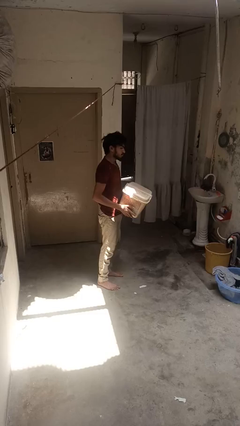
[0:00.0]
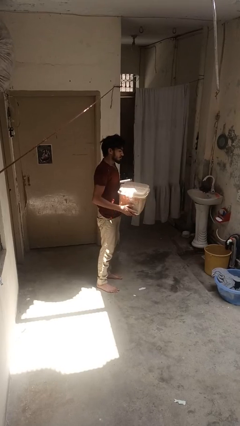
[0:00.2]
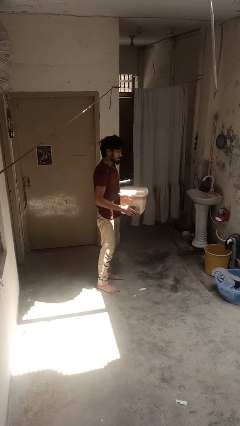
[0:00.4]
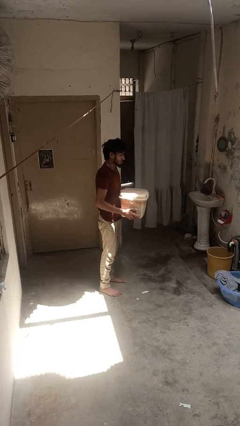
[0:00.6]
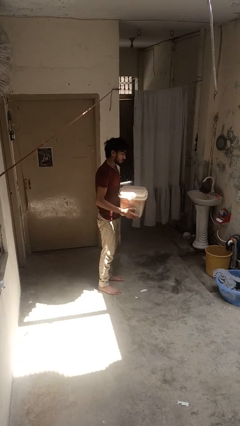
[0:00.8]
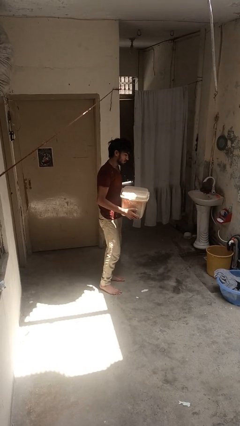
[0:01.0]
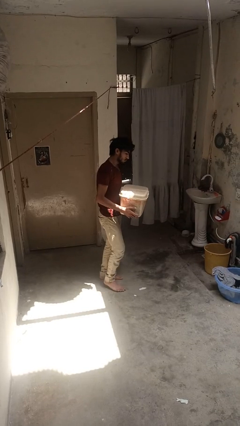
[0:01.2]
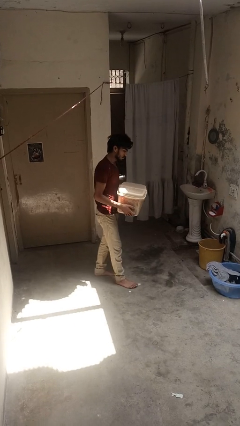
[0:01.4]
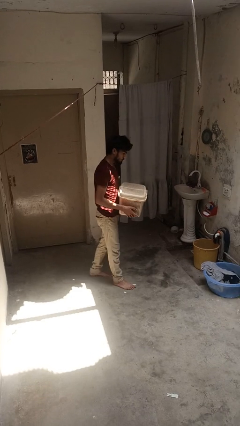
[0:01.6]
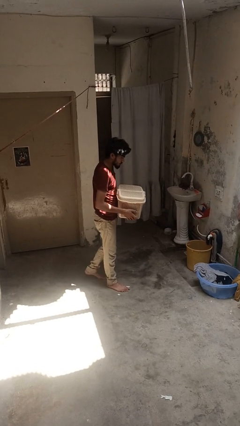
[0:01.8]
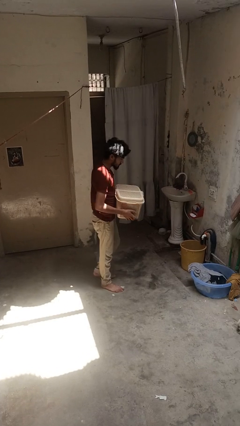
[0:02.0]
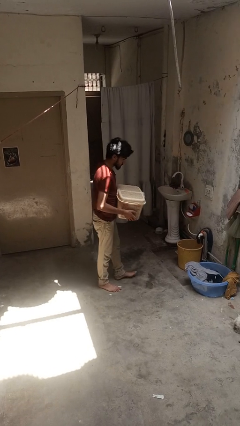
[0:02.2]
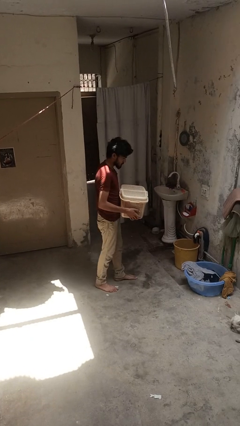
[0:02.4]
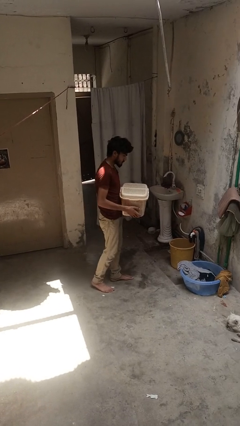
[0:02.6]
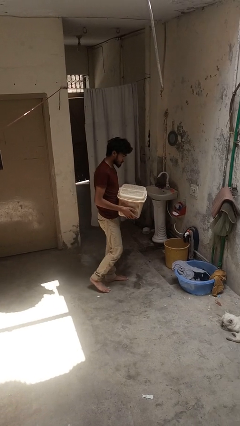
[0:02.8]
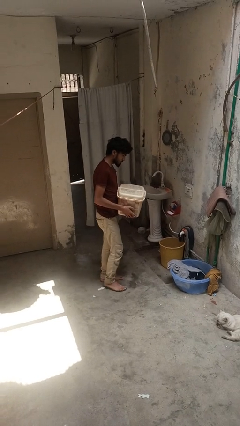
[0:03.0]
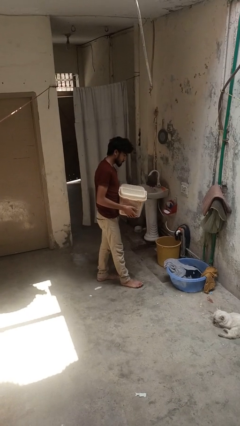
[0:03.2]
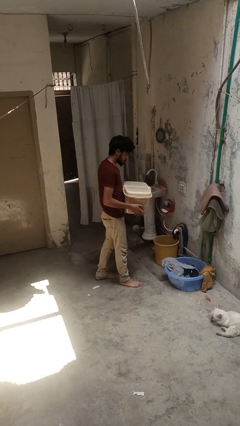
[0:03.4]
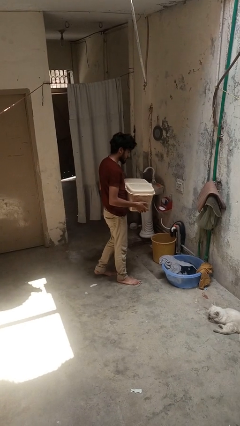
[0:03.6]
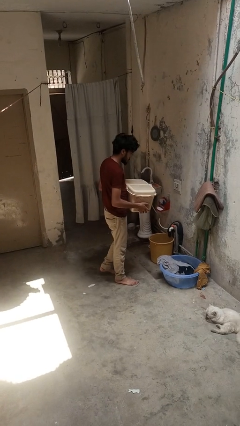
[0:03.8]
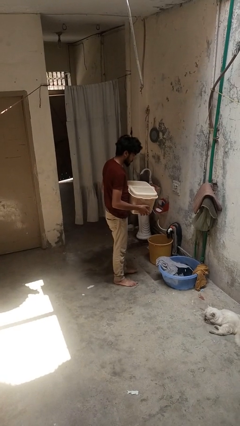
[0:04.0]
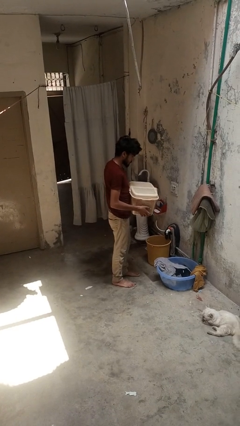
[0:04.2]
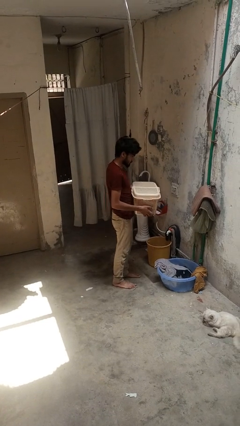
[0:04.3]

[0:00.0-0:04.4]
person carries laundry basket

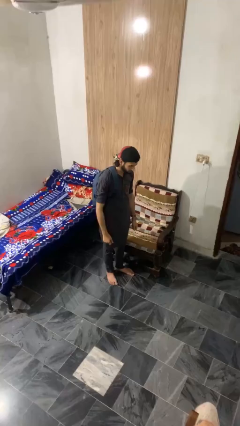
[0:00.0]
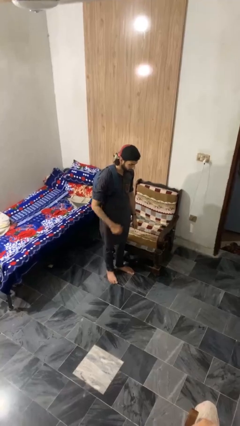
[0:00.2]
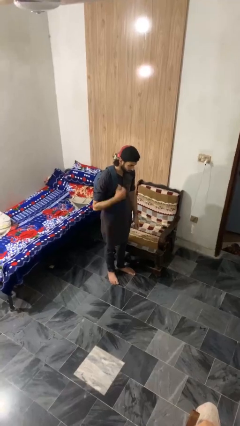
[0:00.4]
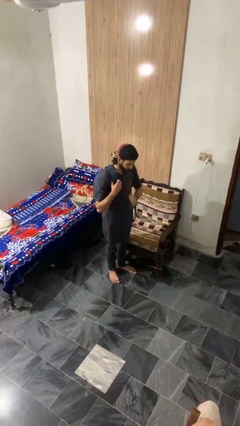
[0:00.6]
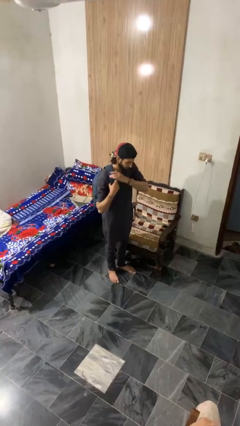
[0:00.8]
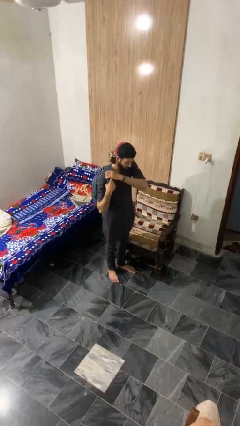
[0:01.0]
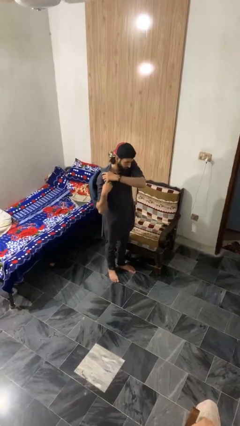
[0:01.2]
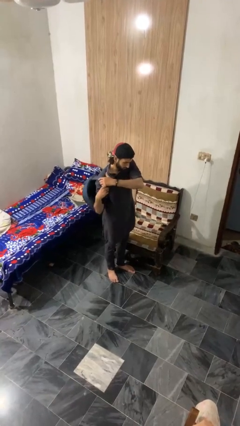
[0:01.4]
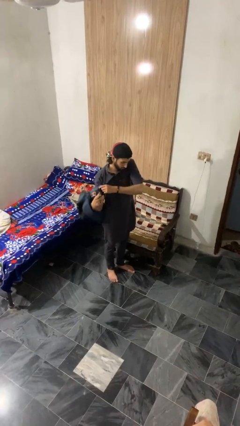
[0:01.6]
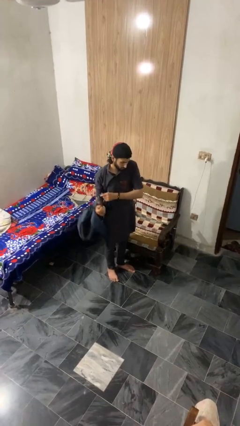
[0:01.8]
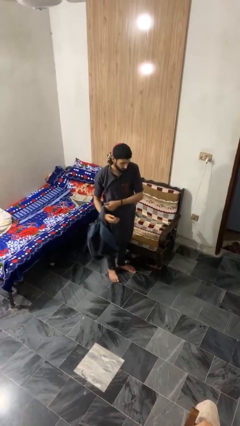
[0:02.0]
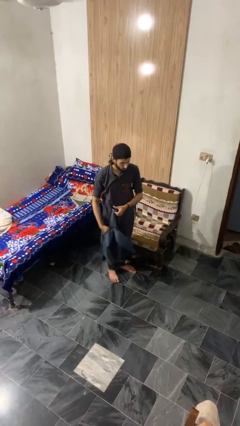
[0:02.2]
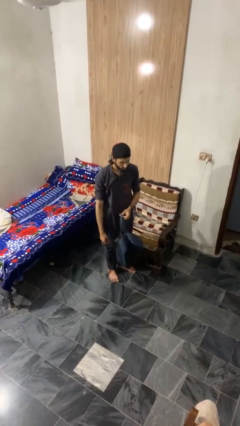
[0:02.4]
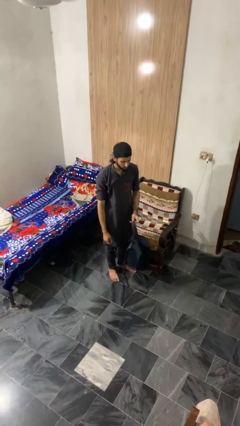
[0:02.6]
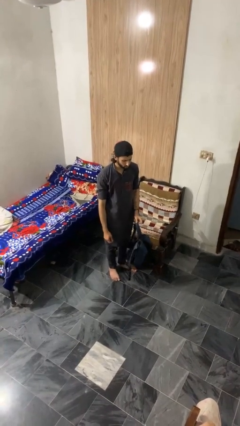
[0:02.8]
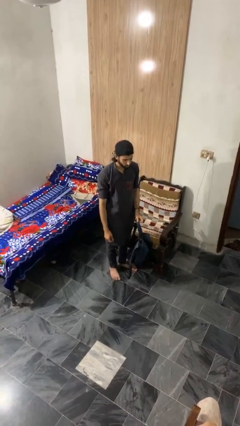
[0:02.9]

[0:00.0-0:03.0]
person takes off backpack

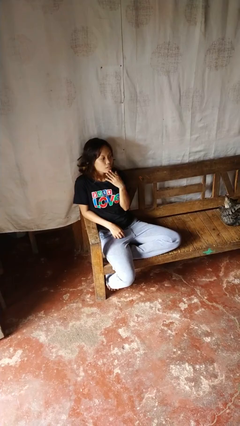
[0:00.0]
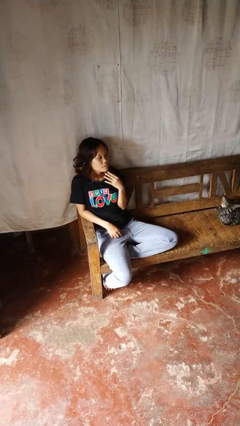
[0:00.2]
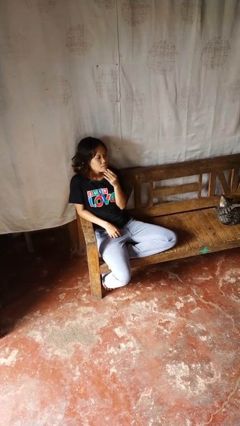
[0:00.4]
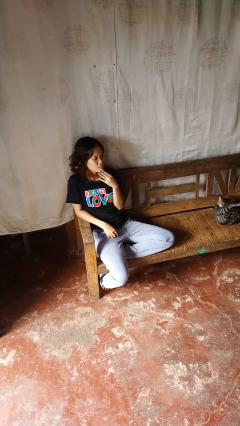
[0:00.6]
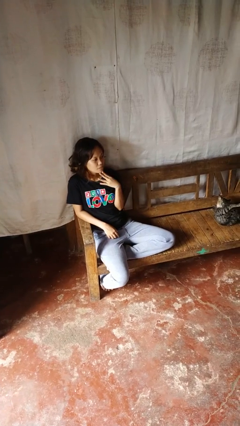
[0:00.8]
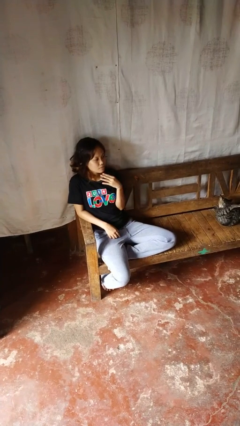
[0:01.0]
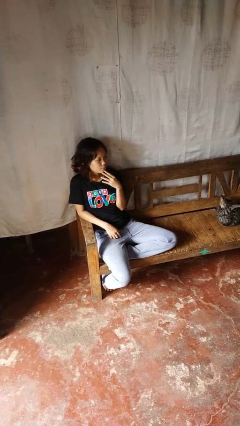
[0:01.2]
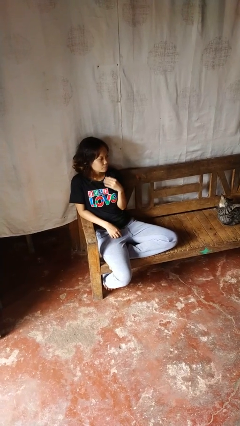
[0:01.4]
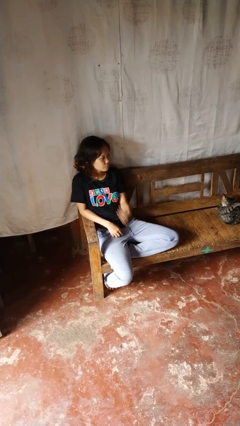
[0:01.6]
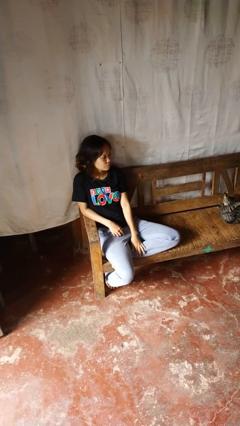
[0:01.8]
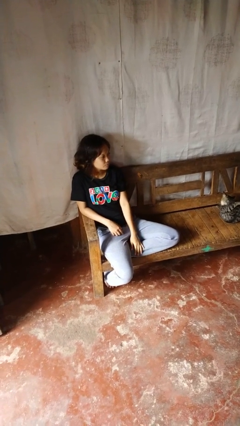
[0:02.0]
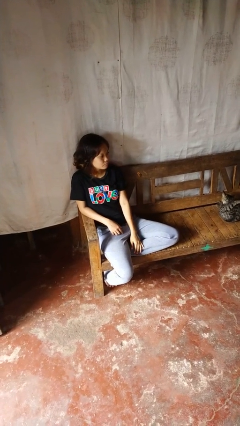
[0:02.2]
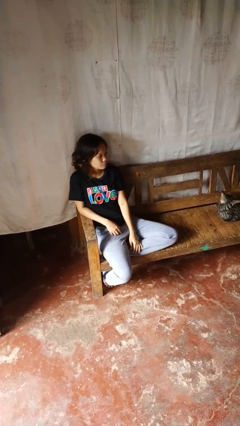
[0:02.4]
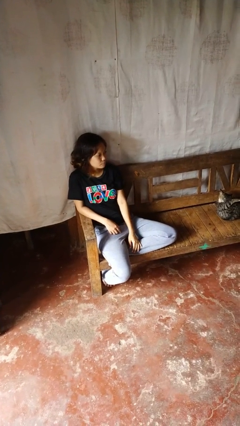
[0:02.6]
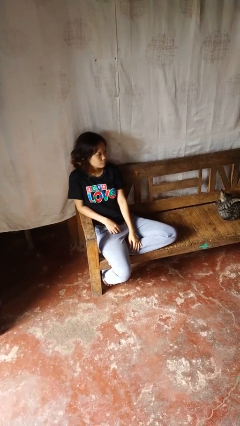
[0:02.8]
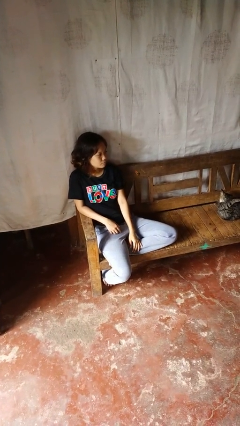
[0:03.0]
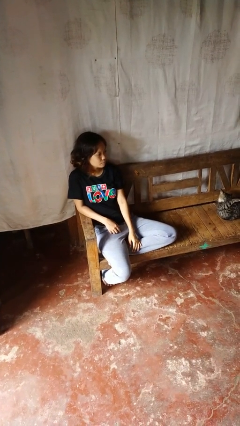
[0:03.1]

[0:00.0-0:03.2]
person strokes chin

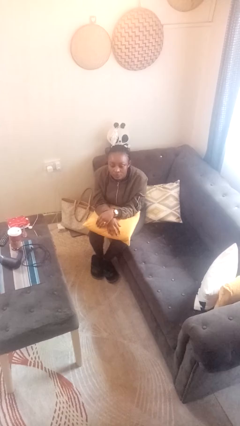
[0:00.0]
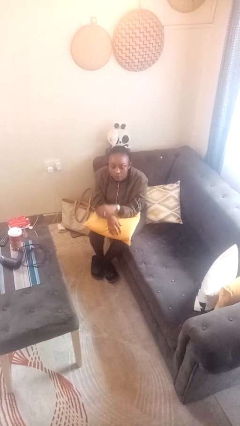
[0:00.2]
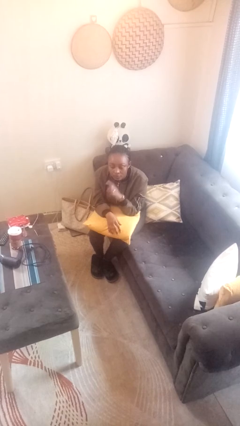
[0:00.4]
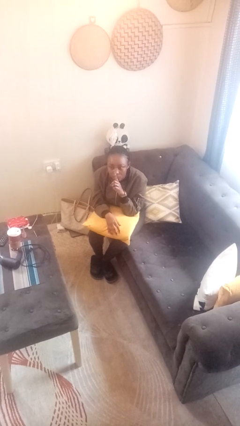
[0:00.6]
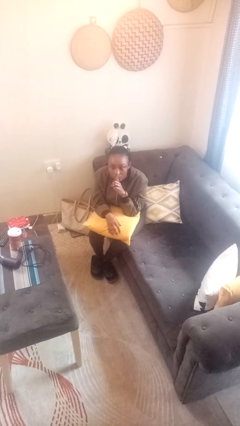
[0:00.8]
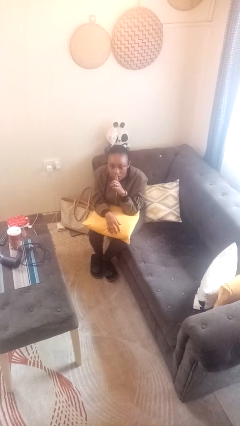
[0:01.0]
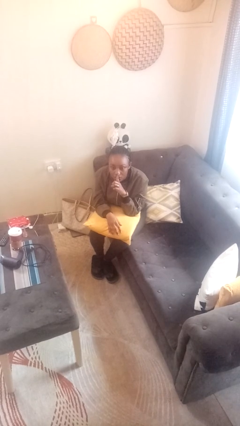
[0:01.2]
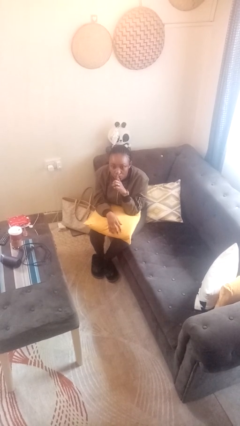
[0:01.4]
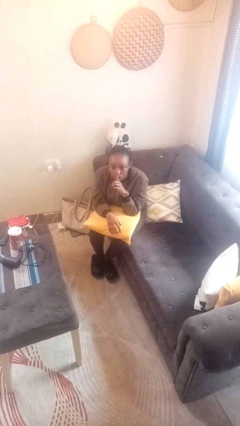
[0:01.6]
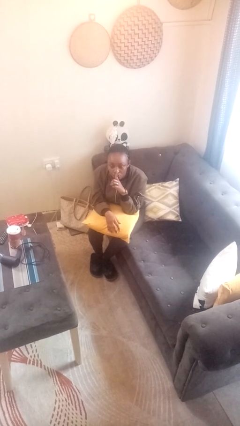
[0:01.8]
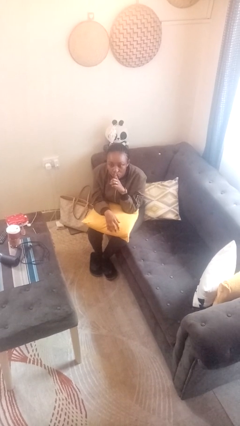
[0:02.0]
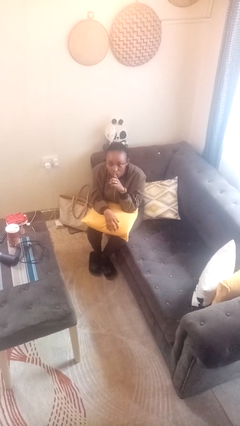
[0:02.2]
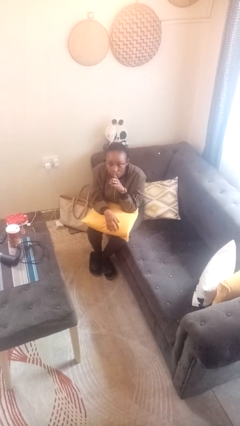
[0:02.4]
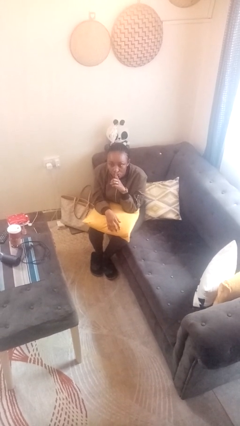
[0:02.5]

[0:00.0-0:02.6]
person gestures be quiet

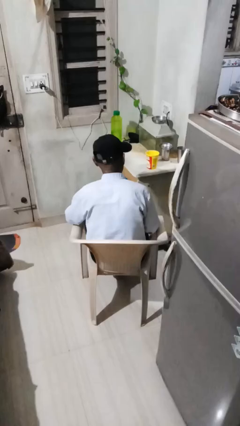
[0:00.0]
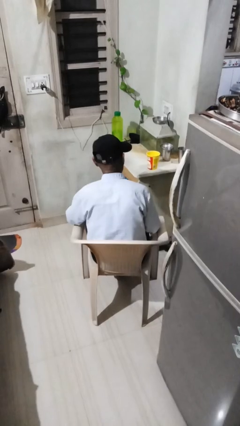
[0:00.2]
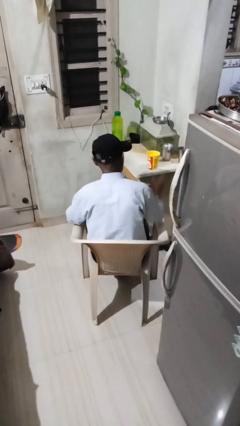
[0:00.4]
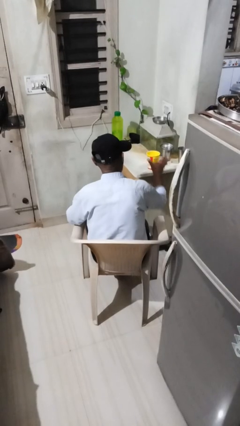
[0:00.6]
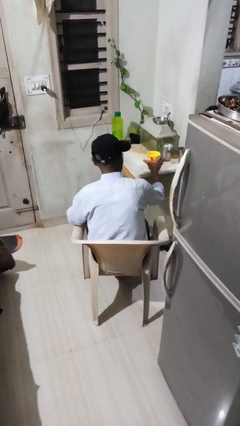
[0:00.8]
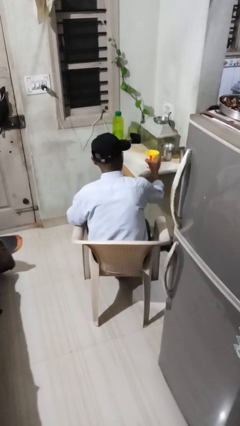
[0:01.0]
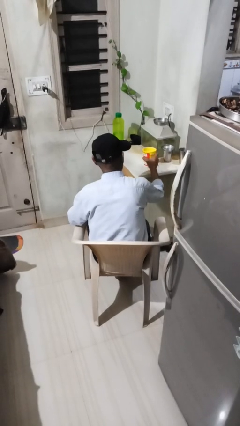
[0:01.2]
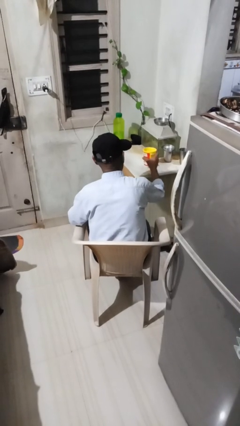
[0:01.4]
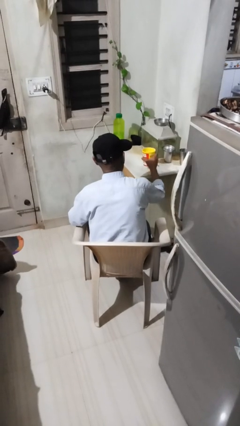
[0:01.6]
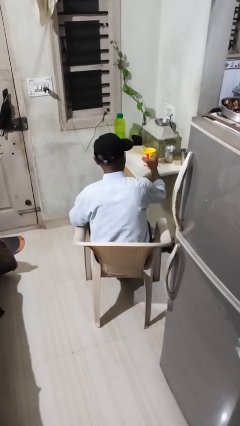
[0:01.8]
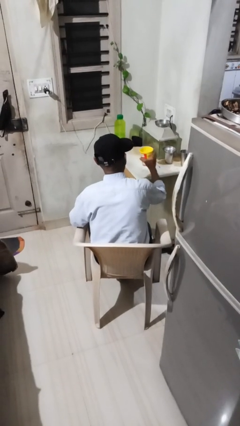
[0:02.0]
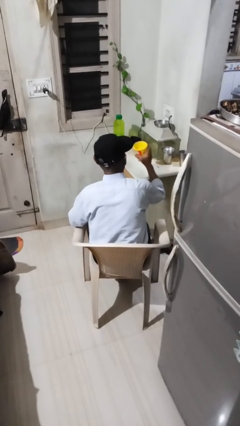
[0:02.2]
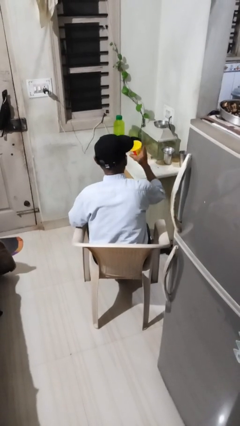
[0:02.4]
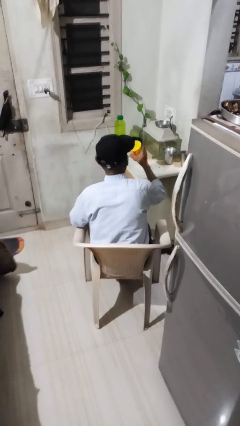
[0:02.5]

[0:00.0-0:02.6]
person picks up object from table

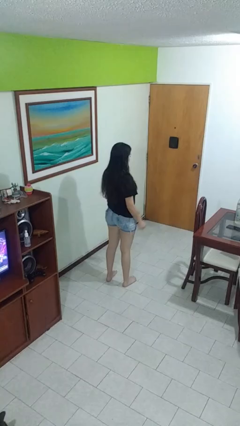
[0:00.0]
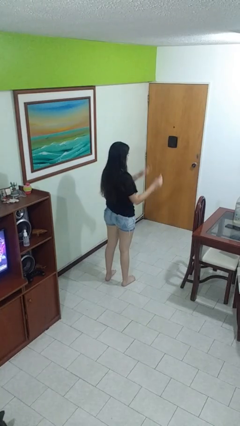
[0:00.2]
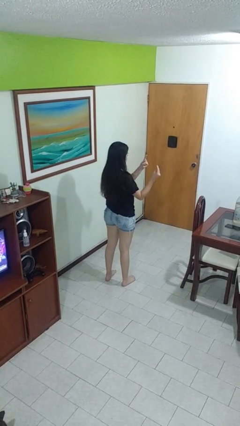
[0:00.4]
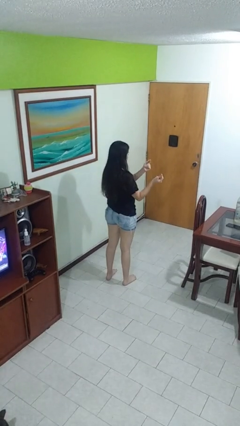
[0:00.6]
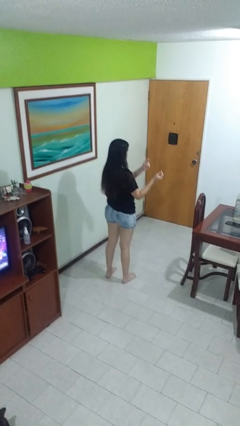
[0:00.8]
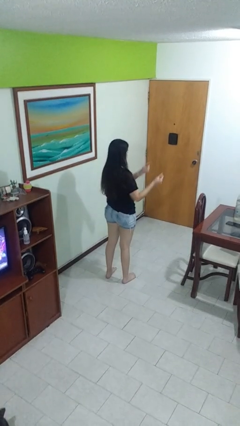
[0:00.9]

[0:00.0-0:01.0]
person snaps fingers

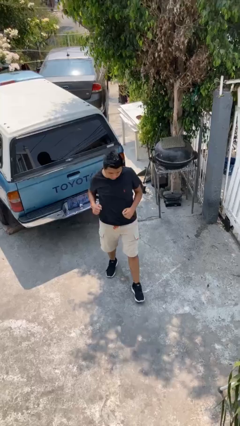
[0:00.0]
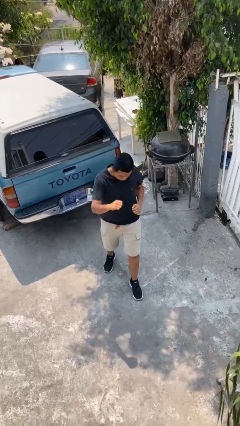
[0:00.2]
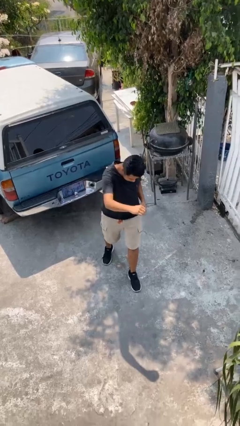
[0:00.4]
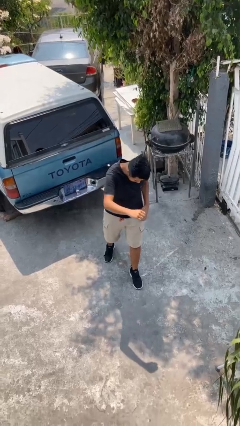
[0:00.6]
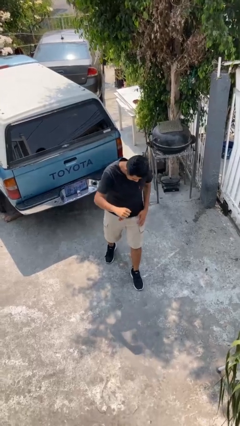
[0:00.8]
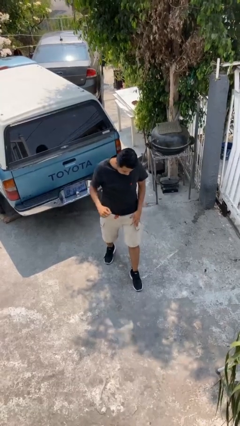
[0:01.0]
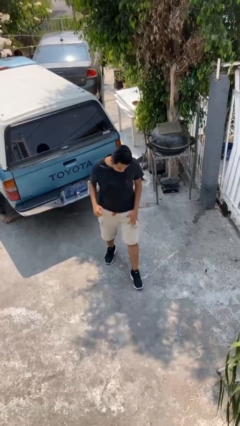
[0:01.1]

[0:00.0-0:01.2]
person punches
